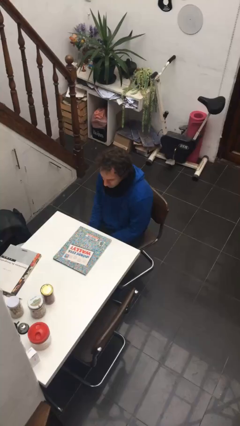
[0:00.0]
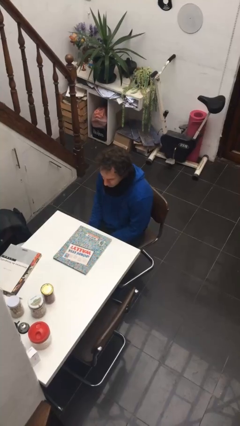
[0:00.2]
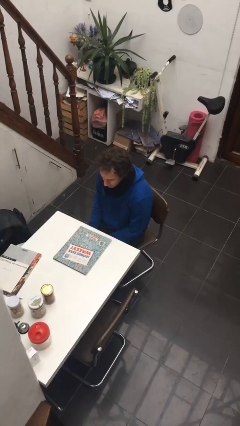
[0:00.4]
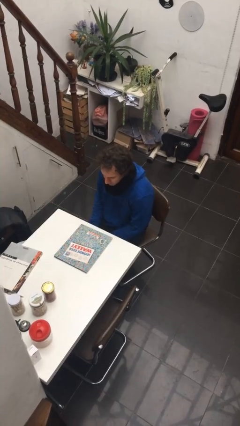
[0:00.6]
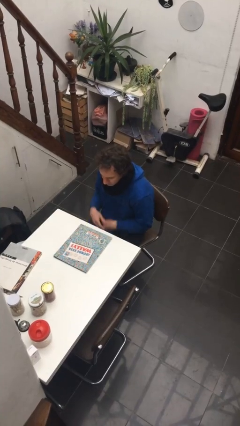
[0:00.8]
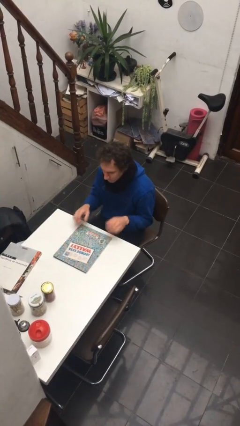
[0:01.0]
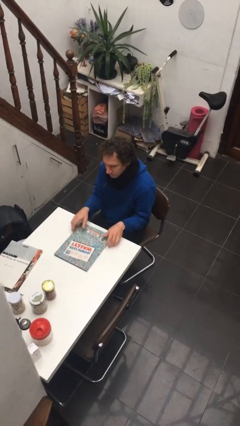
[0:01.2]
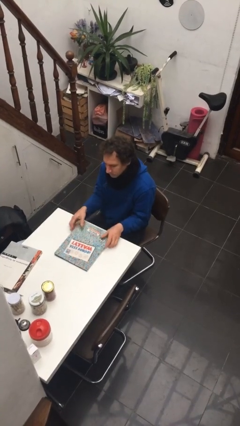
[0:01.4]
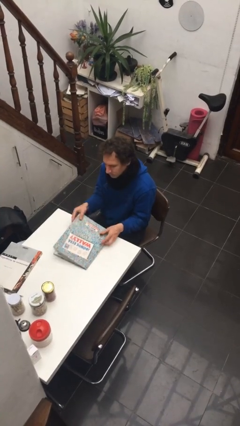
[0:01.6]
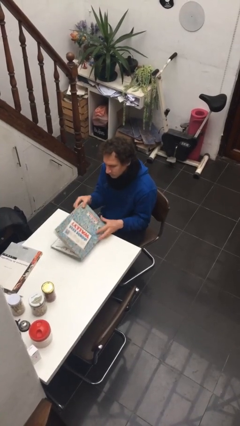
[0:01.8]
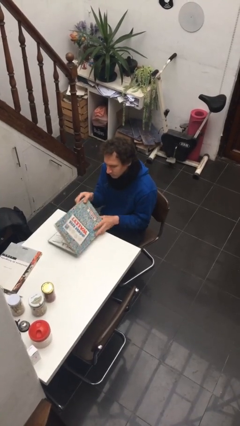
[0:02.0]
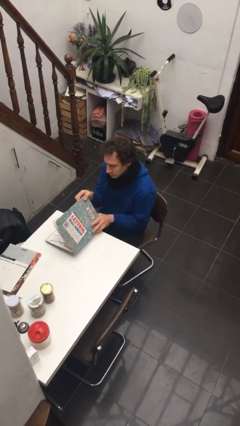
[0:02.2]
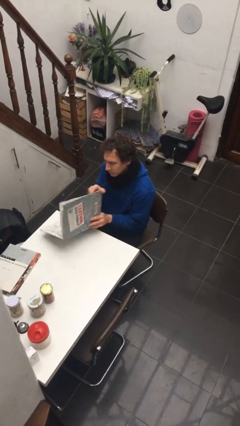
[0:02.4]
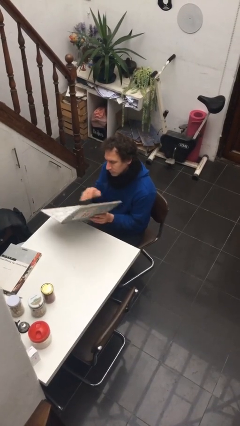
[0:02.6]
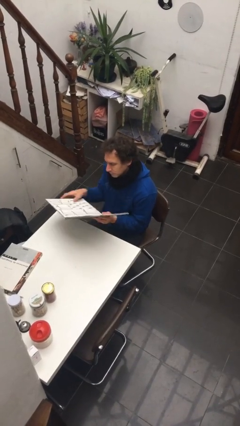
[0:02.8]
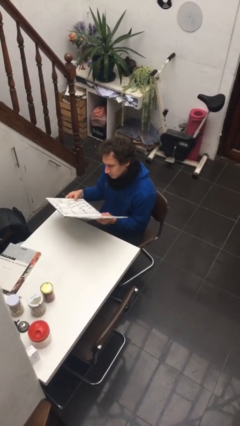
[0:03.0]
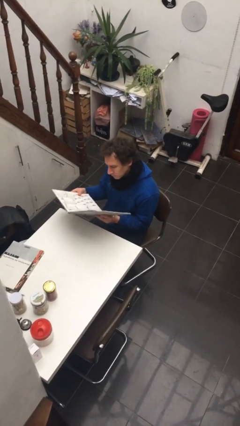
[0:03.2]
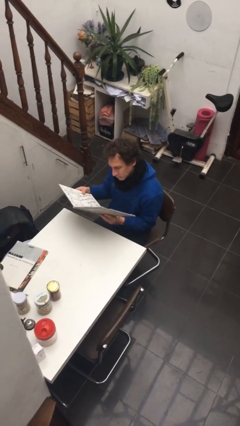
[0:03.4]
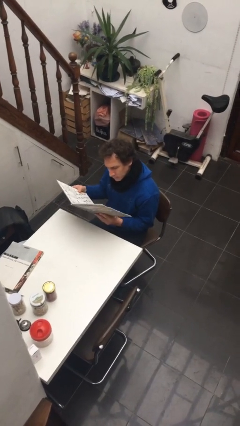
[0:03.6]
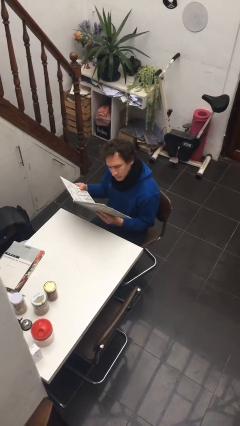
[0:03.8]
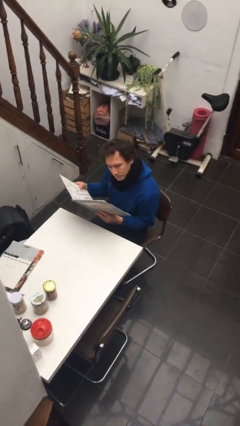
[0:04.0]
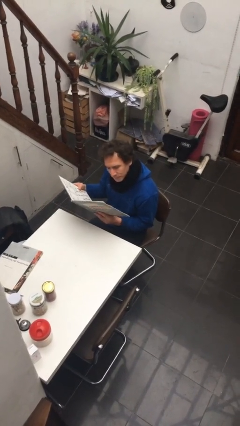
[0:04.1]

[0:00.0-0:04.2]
person picks up object from table

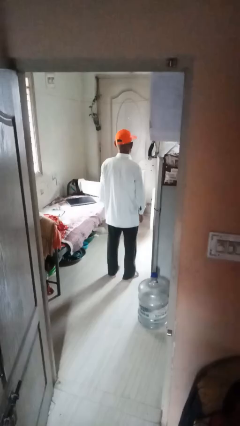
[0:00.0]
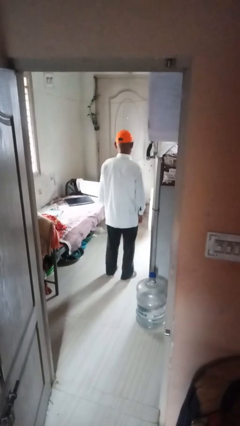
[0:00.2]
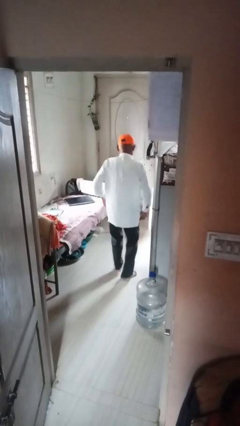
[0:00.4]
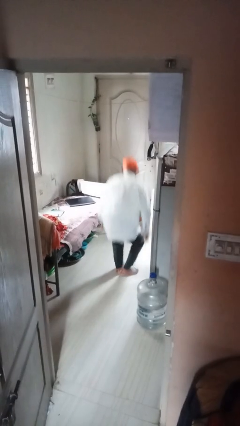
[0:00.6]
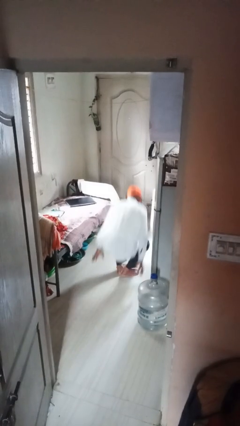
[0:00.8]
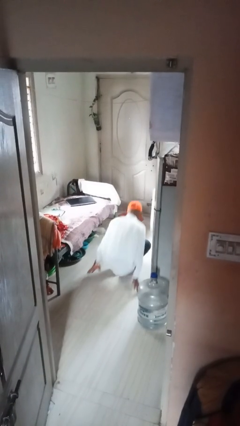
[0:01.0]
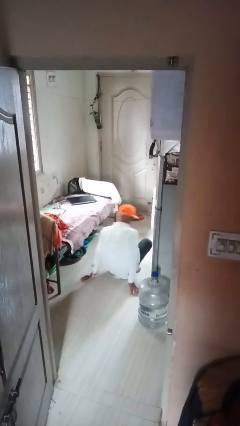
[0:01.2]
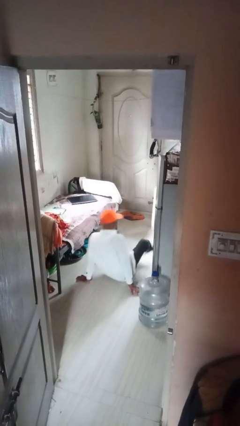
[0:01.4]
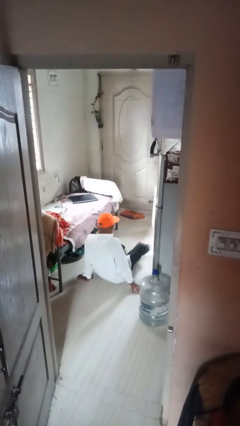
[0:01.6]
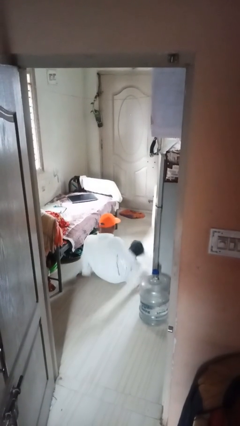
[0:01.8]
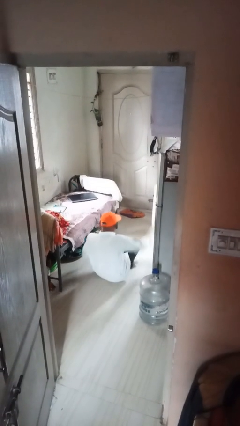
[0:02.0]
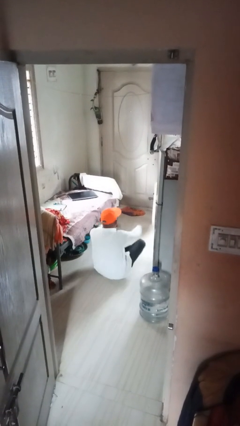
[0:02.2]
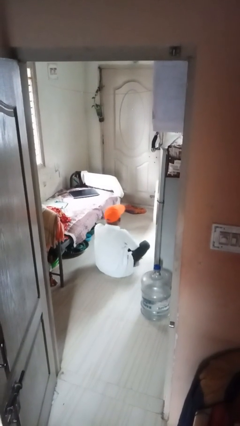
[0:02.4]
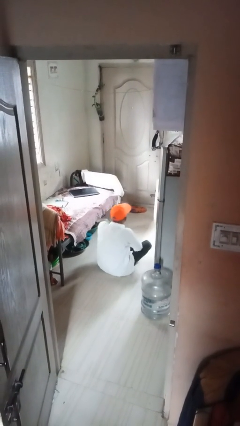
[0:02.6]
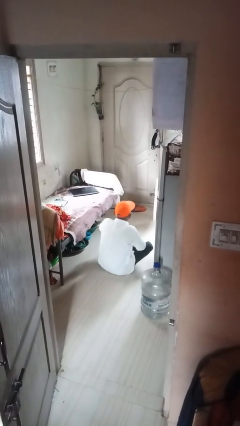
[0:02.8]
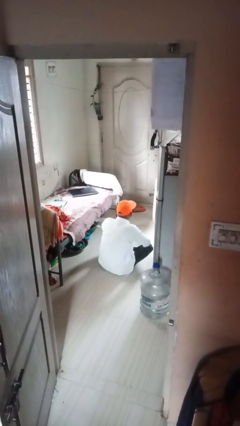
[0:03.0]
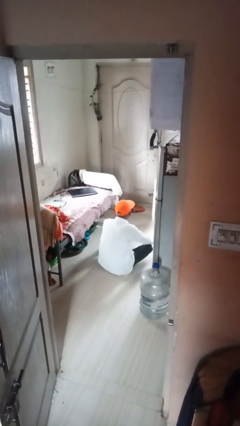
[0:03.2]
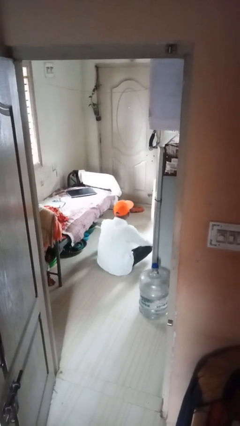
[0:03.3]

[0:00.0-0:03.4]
person sits crisscross

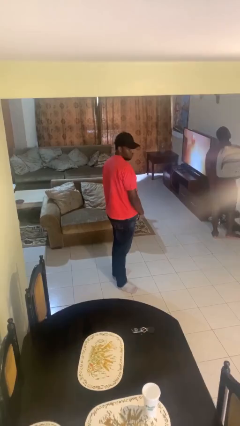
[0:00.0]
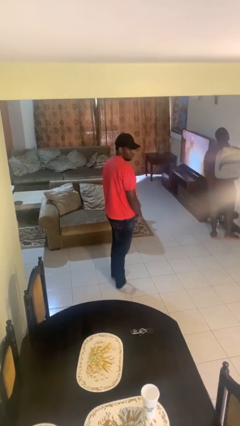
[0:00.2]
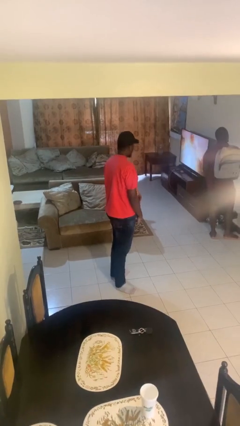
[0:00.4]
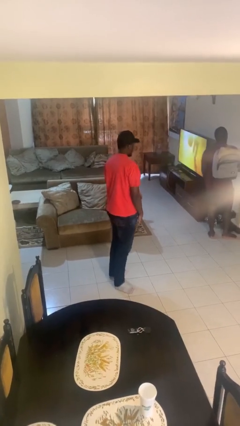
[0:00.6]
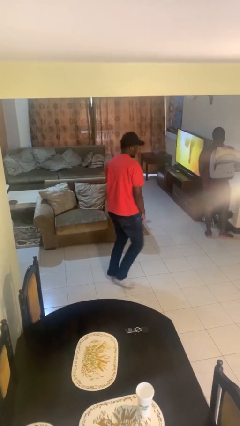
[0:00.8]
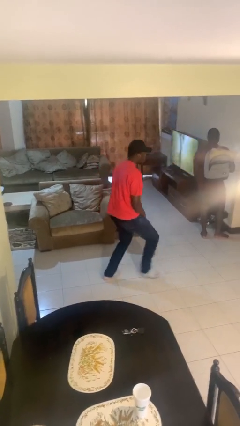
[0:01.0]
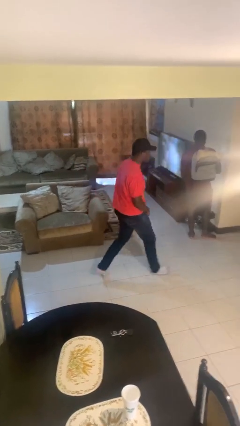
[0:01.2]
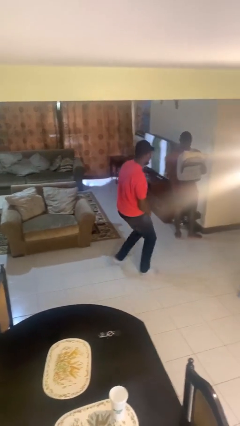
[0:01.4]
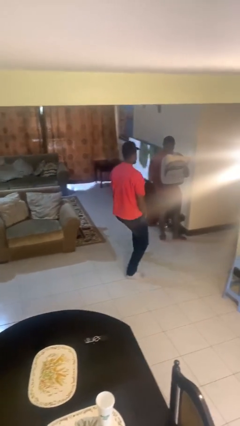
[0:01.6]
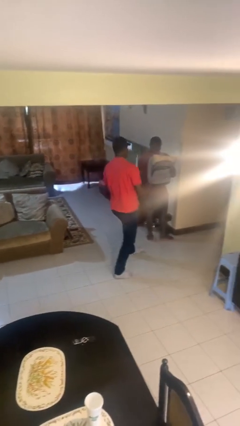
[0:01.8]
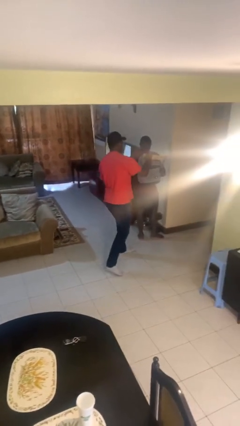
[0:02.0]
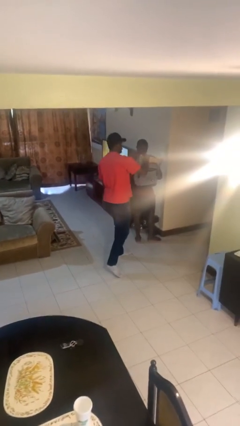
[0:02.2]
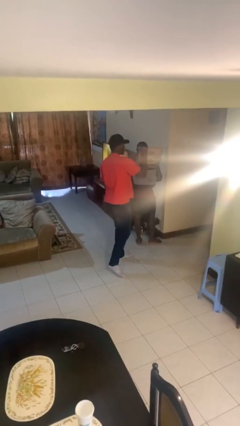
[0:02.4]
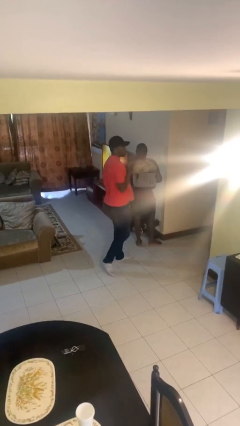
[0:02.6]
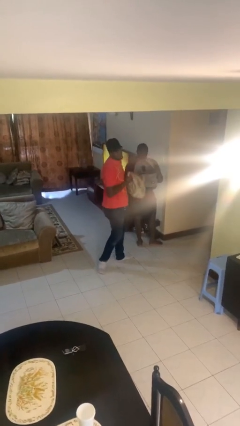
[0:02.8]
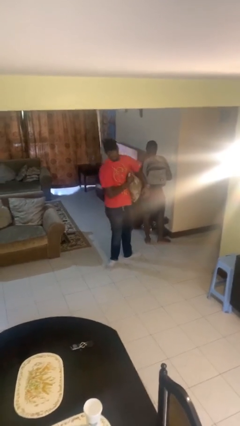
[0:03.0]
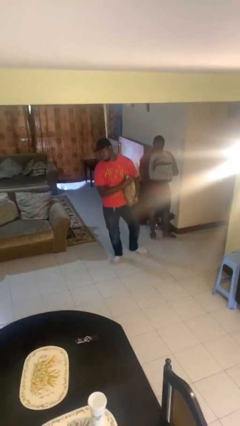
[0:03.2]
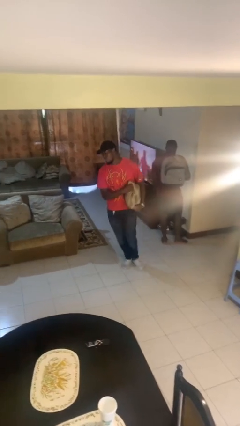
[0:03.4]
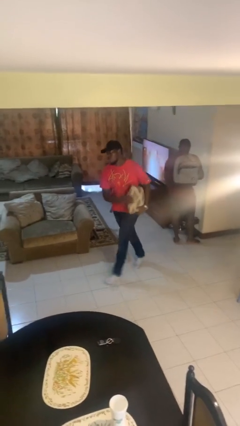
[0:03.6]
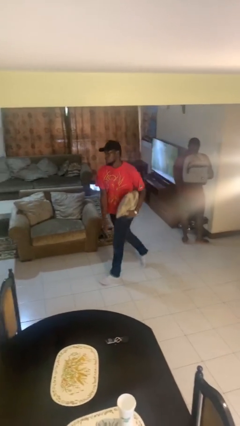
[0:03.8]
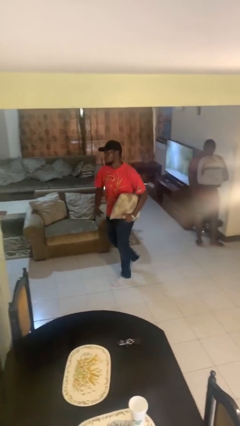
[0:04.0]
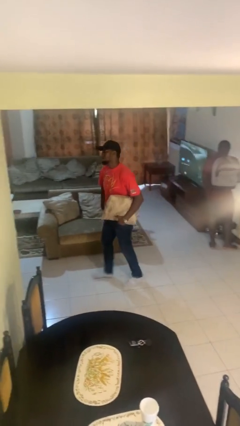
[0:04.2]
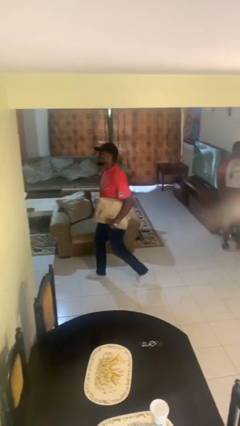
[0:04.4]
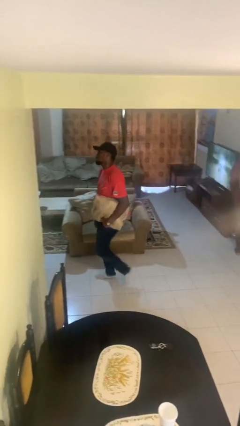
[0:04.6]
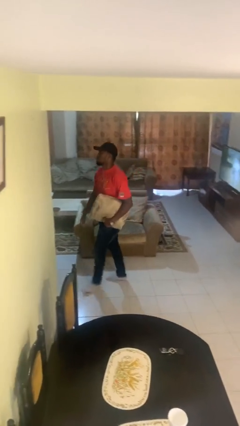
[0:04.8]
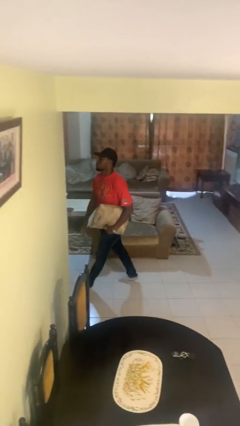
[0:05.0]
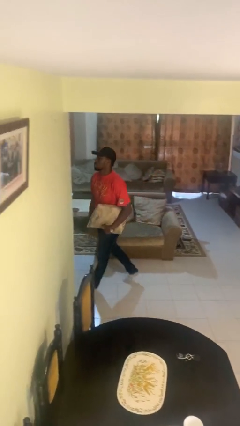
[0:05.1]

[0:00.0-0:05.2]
person steals object from person

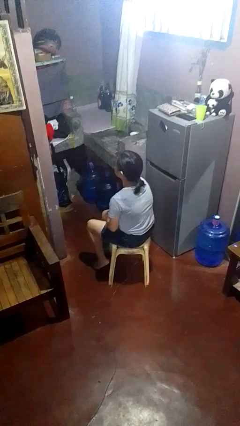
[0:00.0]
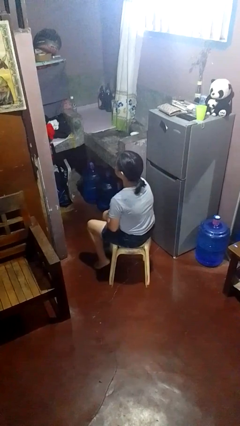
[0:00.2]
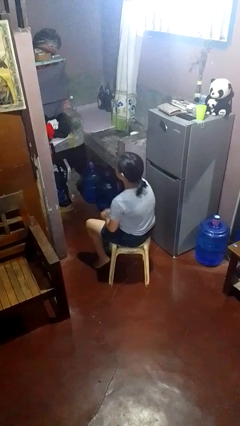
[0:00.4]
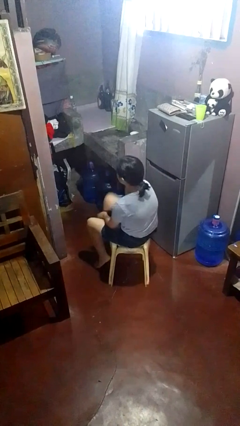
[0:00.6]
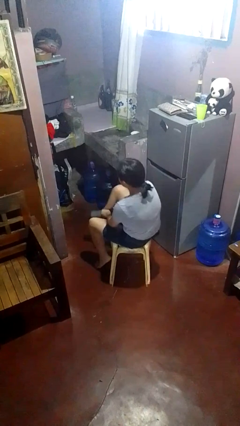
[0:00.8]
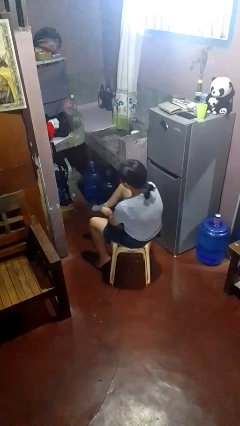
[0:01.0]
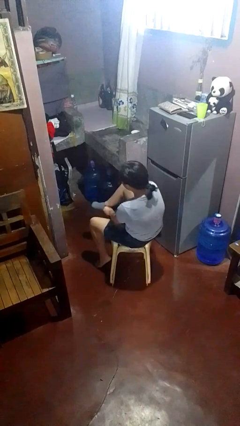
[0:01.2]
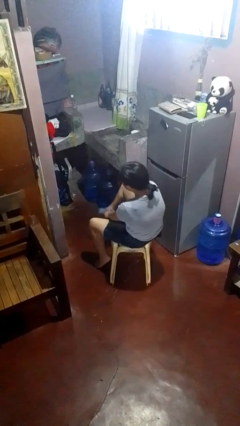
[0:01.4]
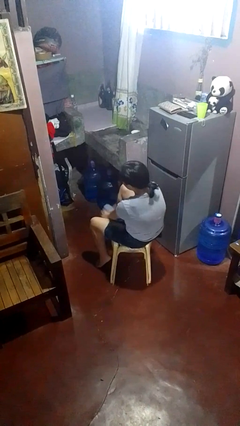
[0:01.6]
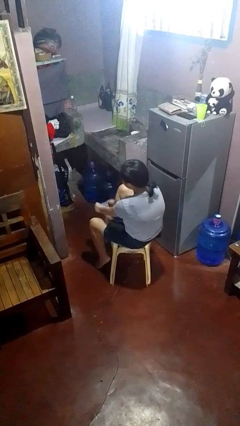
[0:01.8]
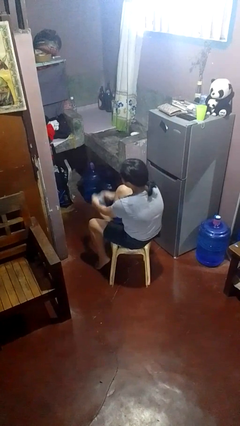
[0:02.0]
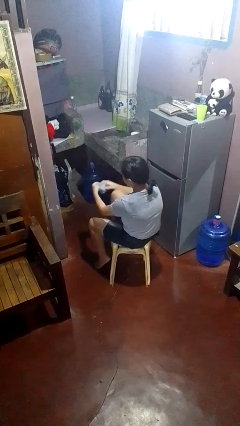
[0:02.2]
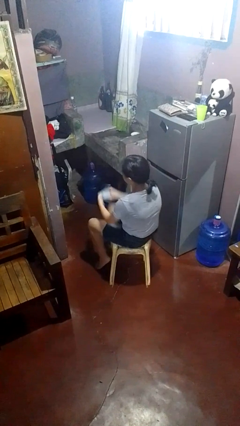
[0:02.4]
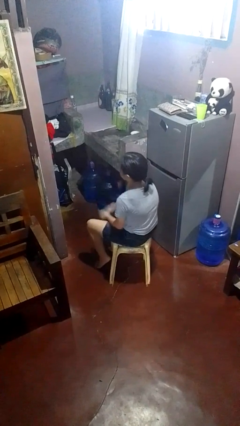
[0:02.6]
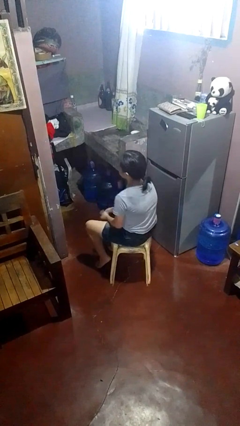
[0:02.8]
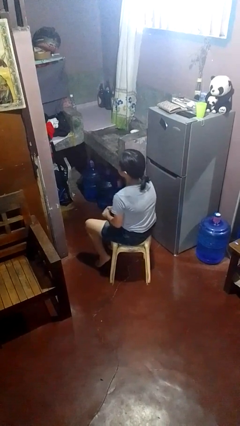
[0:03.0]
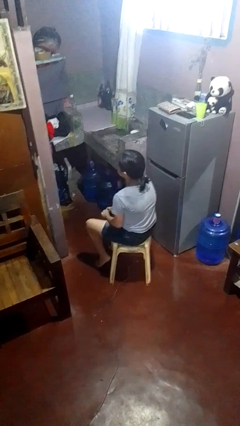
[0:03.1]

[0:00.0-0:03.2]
person takes off socks

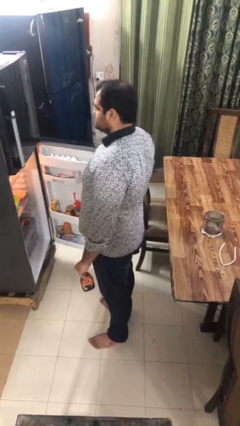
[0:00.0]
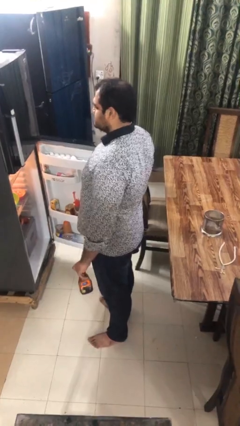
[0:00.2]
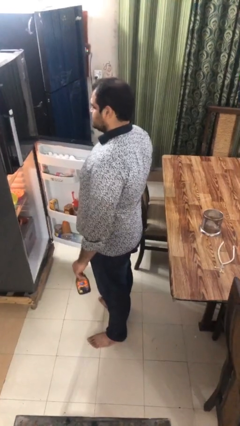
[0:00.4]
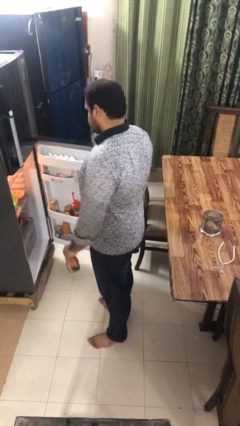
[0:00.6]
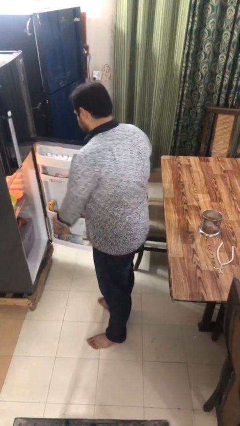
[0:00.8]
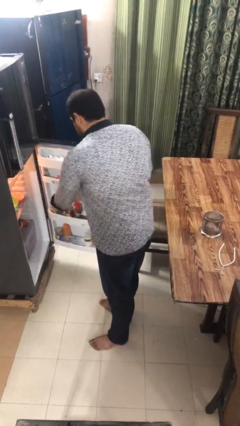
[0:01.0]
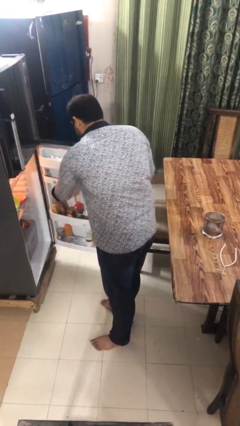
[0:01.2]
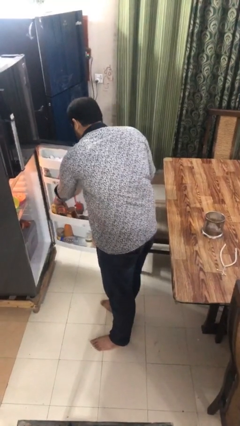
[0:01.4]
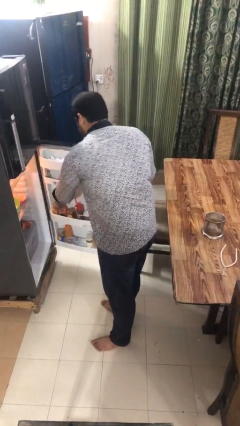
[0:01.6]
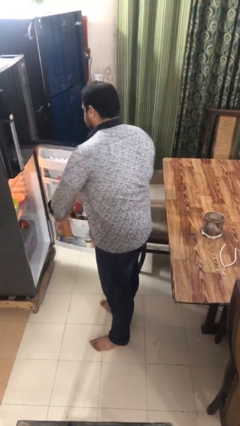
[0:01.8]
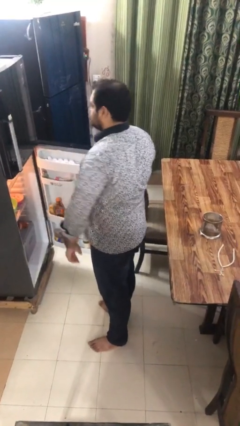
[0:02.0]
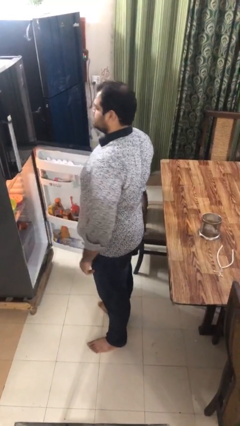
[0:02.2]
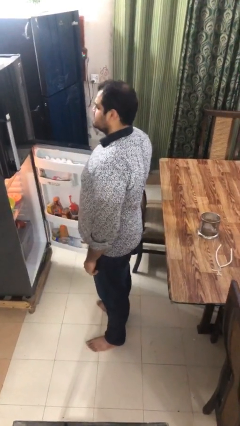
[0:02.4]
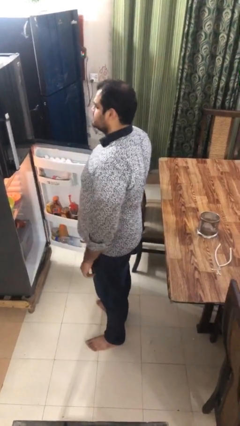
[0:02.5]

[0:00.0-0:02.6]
person puts object into refrigerator
